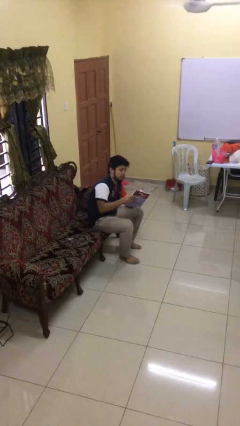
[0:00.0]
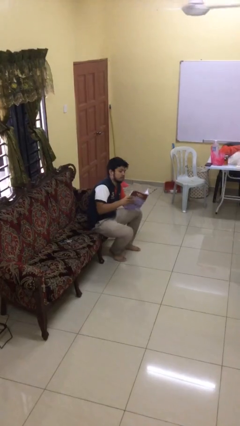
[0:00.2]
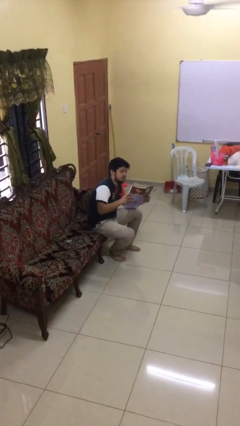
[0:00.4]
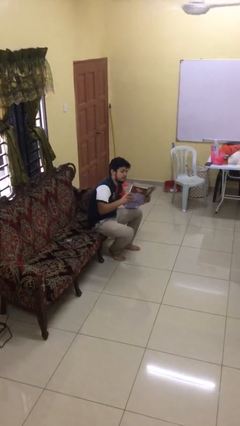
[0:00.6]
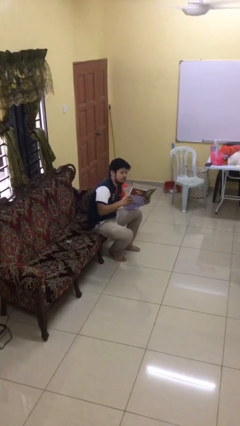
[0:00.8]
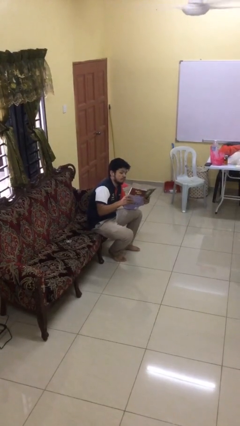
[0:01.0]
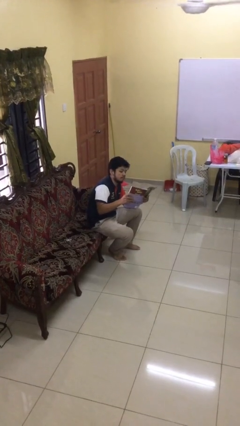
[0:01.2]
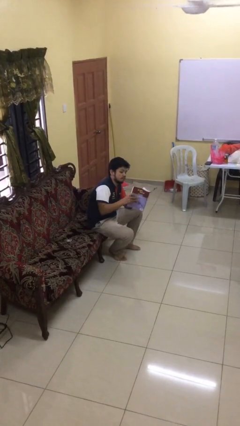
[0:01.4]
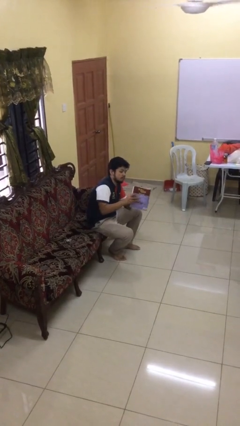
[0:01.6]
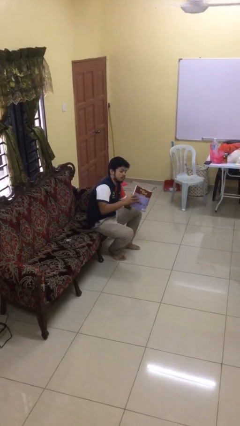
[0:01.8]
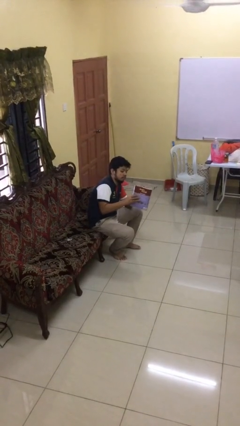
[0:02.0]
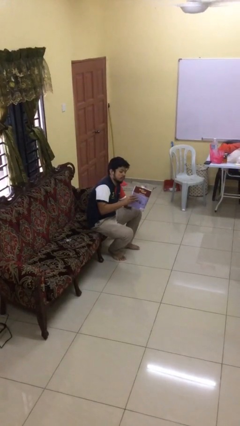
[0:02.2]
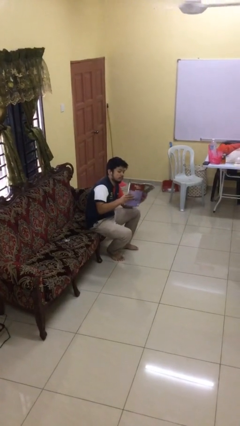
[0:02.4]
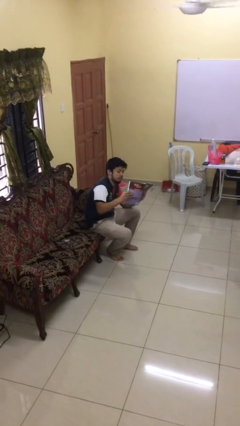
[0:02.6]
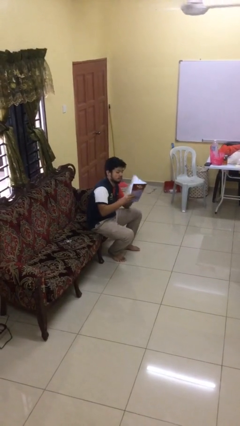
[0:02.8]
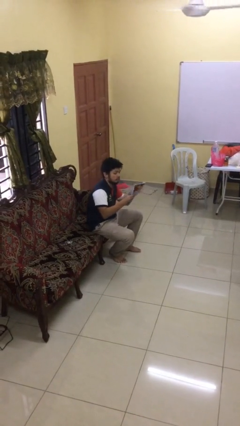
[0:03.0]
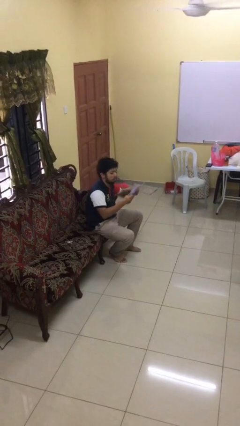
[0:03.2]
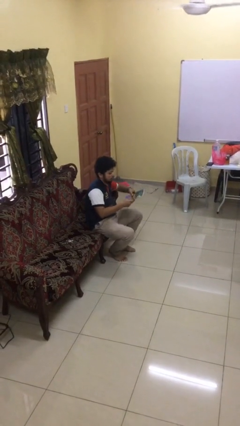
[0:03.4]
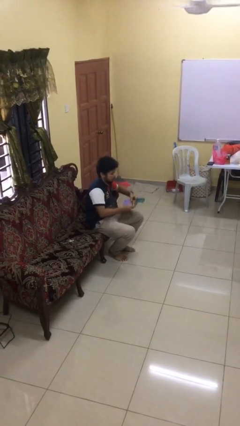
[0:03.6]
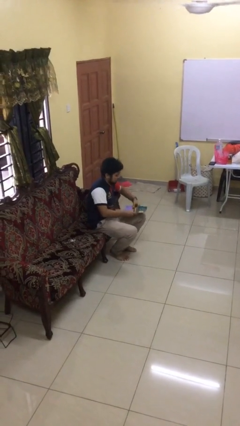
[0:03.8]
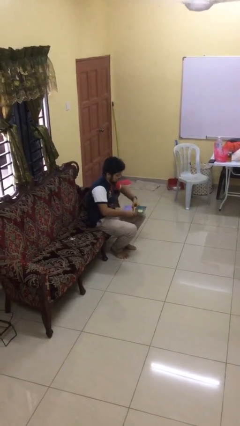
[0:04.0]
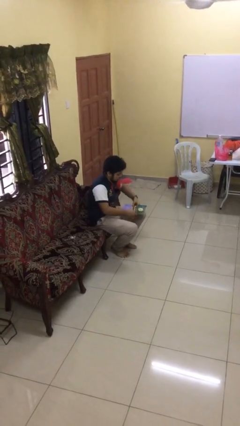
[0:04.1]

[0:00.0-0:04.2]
person reads magazine

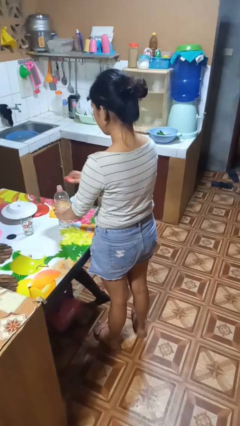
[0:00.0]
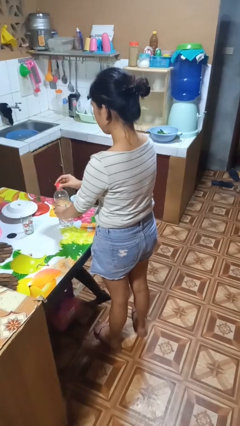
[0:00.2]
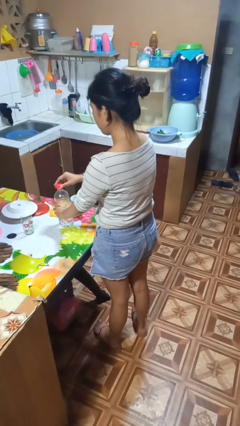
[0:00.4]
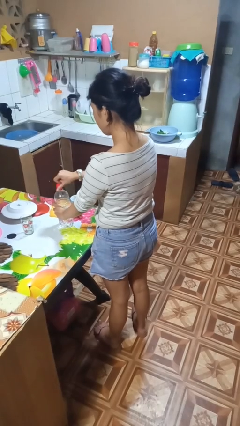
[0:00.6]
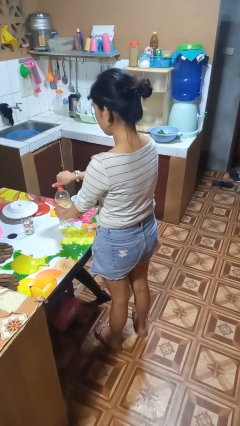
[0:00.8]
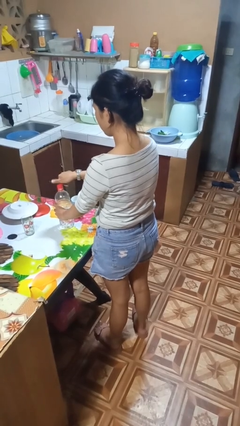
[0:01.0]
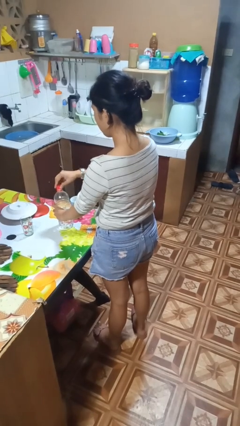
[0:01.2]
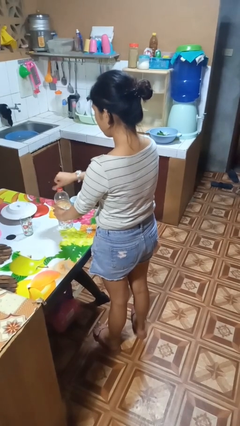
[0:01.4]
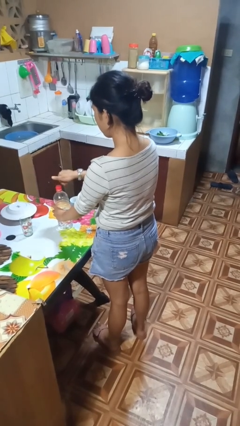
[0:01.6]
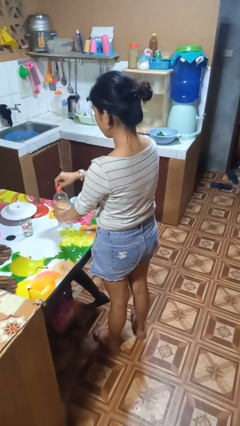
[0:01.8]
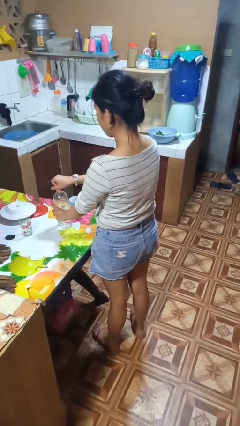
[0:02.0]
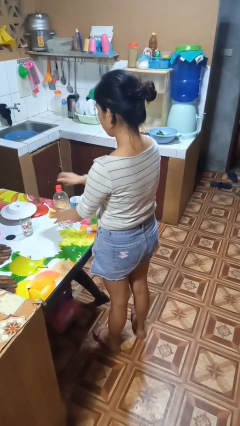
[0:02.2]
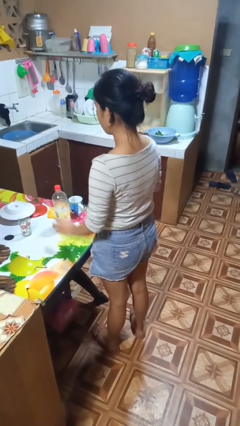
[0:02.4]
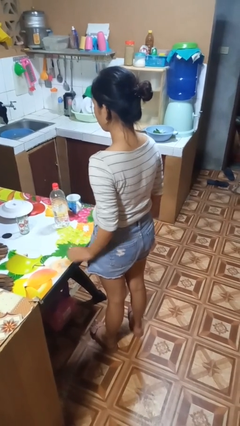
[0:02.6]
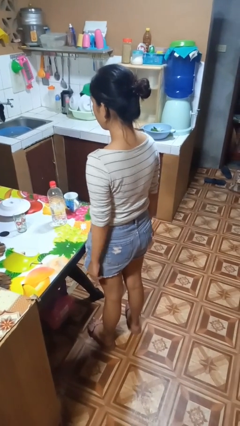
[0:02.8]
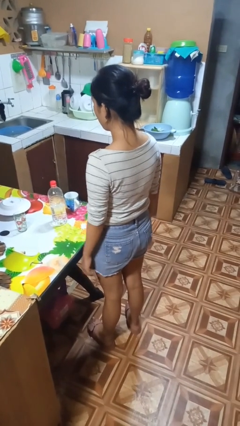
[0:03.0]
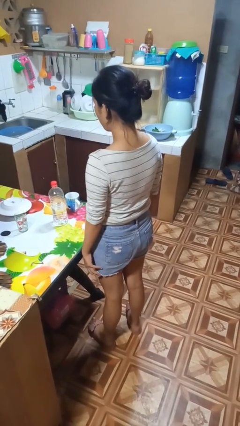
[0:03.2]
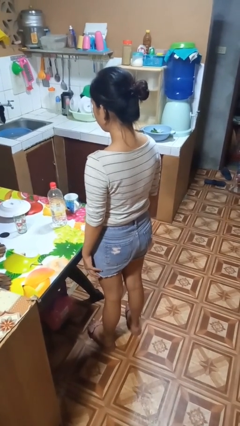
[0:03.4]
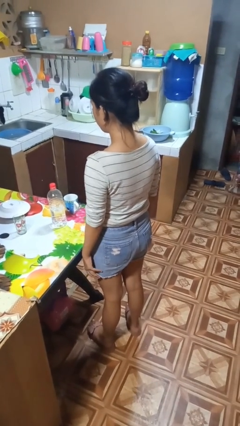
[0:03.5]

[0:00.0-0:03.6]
person screws lid to bottle

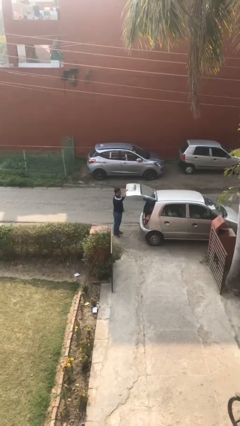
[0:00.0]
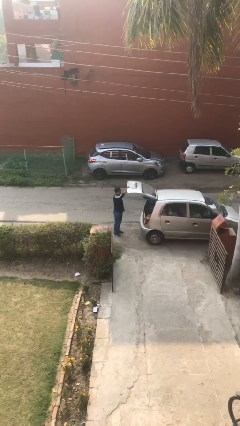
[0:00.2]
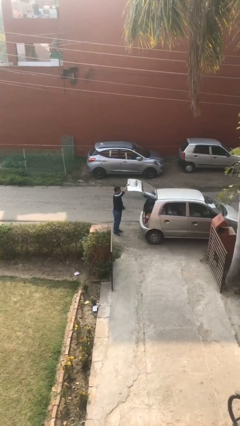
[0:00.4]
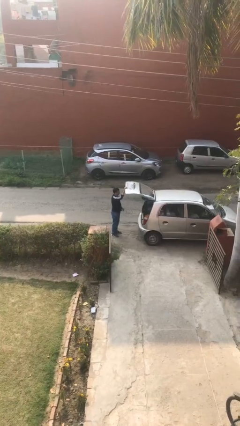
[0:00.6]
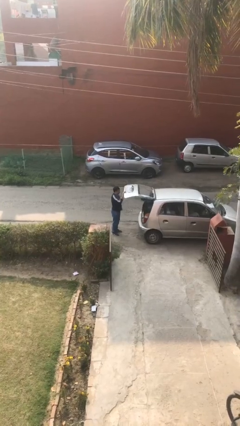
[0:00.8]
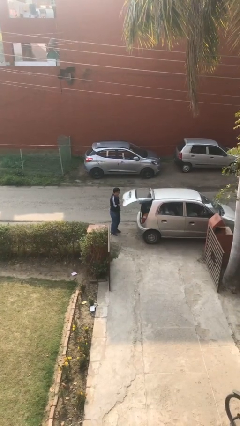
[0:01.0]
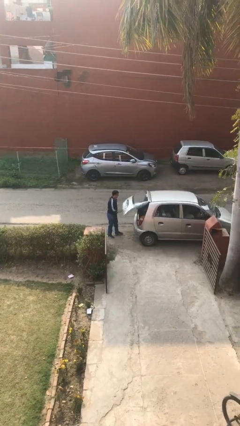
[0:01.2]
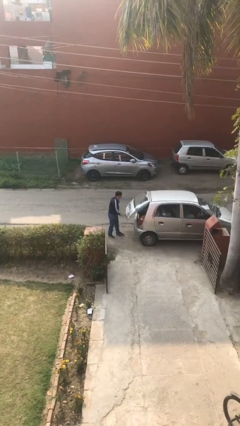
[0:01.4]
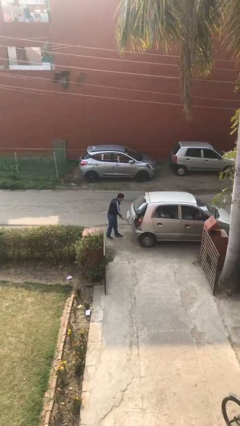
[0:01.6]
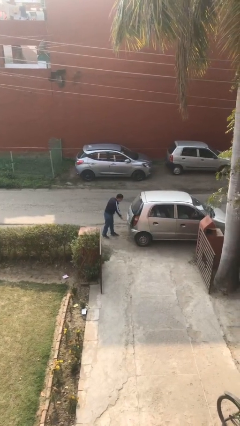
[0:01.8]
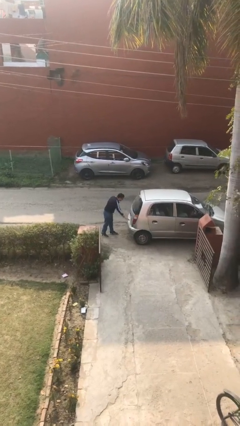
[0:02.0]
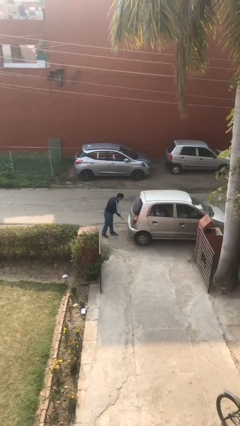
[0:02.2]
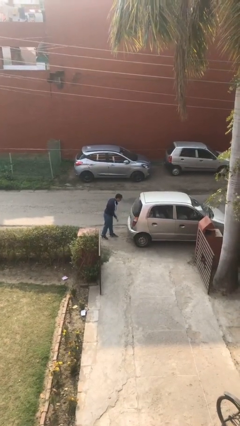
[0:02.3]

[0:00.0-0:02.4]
person closes car trunk

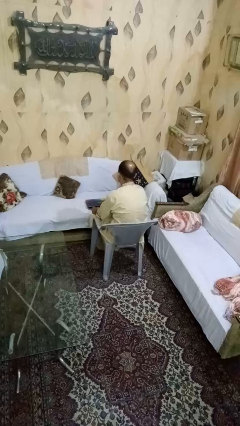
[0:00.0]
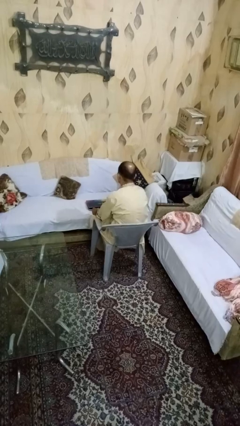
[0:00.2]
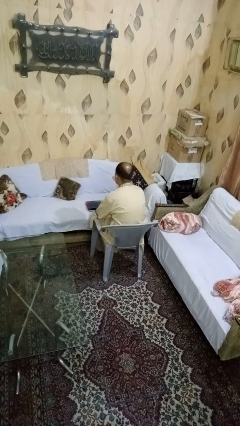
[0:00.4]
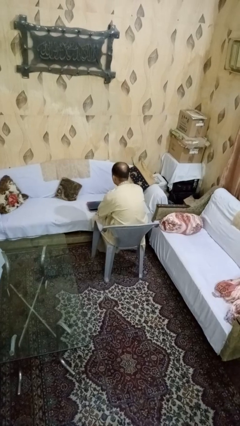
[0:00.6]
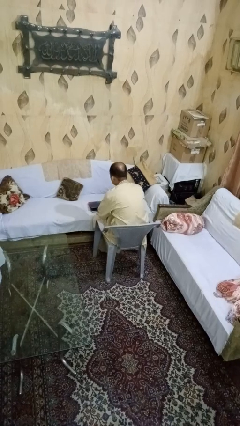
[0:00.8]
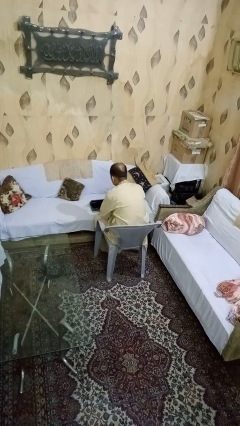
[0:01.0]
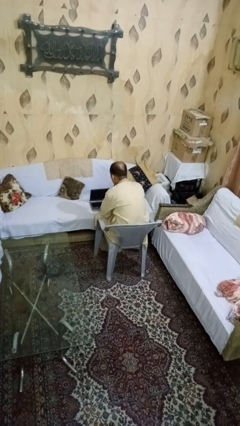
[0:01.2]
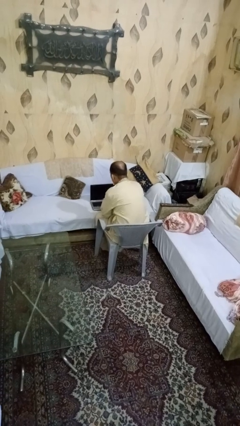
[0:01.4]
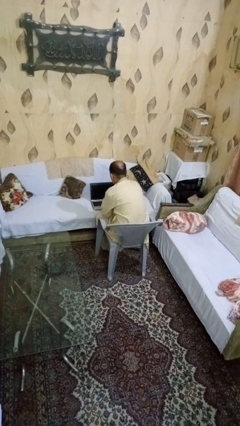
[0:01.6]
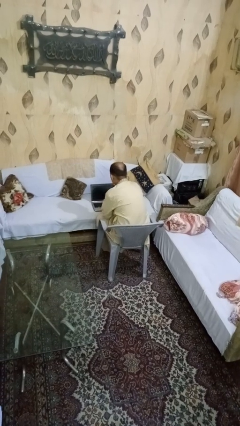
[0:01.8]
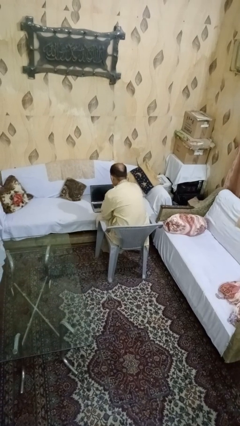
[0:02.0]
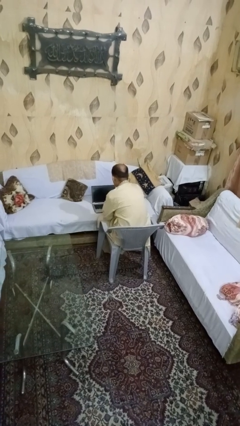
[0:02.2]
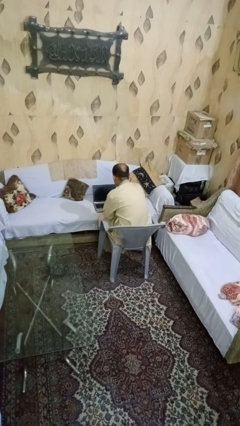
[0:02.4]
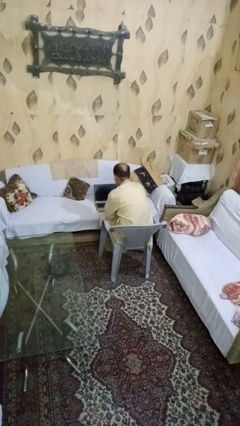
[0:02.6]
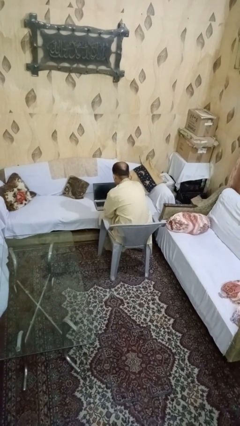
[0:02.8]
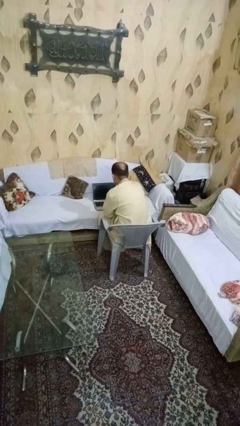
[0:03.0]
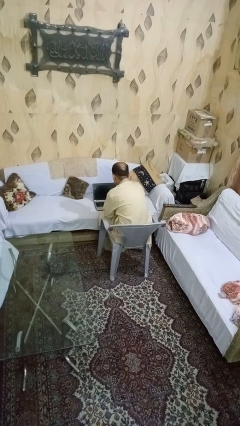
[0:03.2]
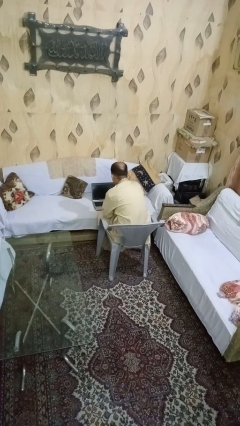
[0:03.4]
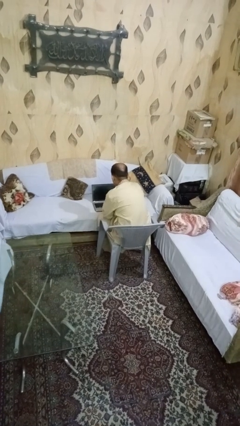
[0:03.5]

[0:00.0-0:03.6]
person opens laptop

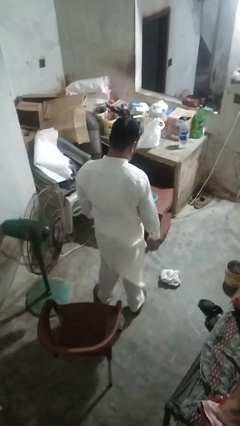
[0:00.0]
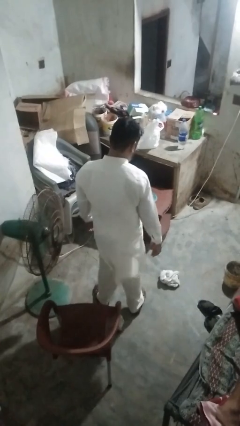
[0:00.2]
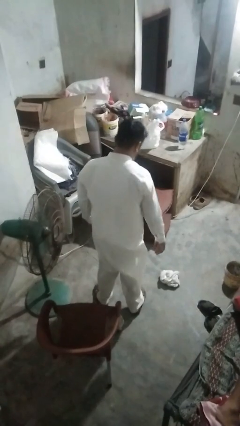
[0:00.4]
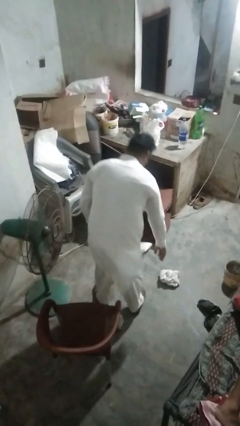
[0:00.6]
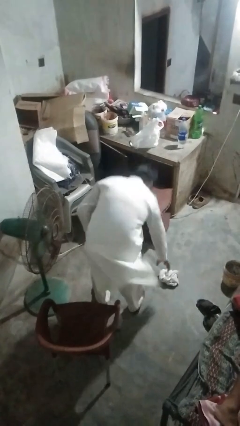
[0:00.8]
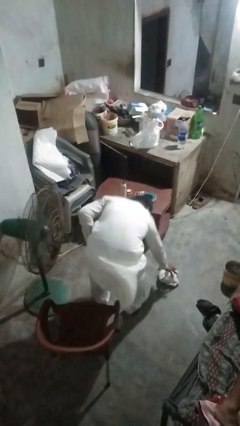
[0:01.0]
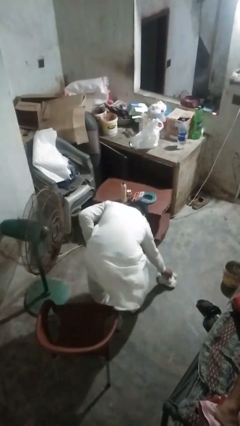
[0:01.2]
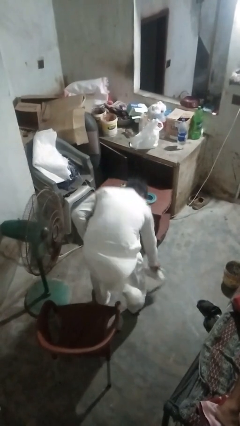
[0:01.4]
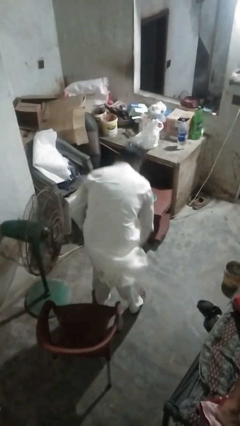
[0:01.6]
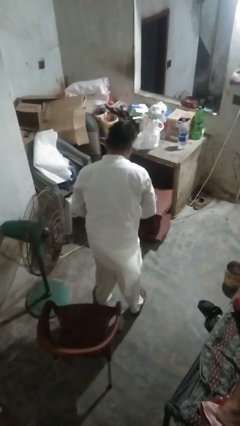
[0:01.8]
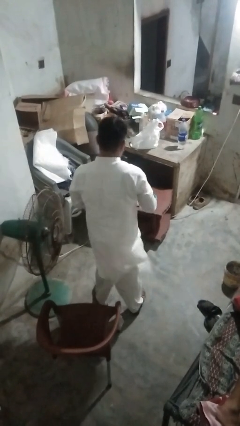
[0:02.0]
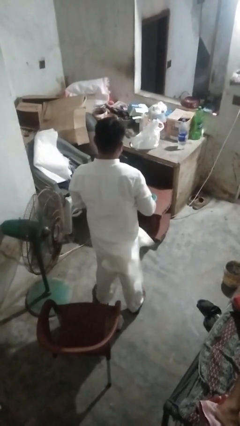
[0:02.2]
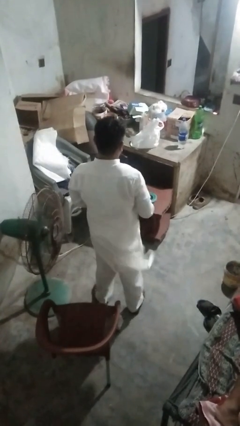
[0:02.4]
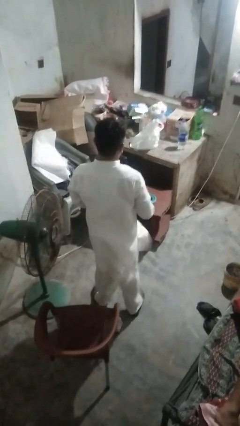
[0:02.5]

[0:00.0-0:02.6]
person picks up object from floor

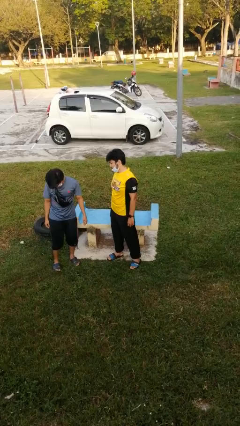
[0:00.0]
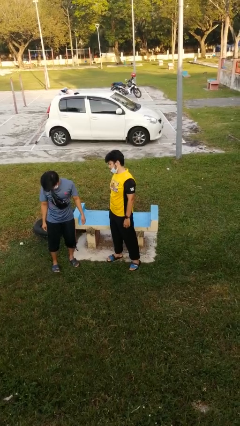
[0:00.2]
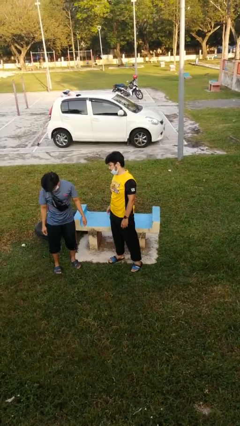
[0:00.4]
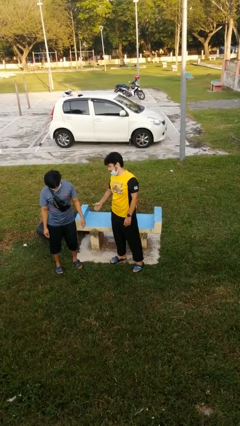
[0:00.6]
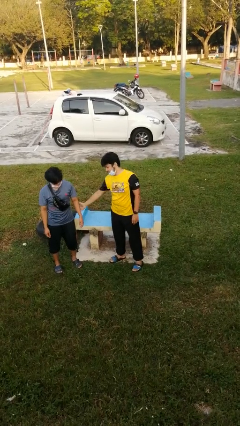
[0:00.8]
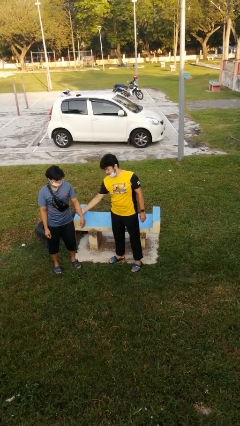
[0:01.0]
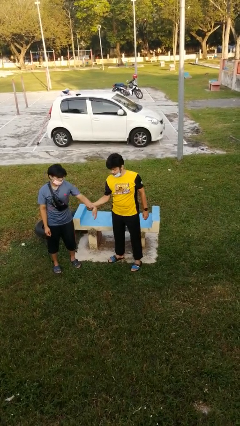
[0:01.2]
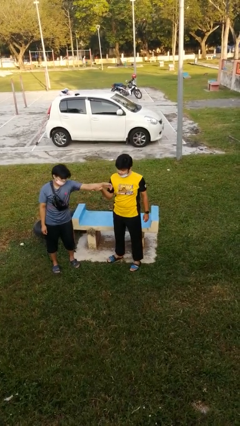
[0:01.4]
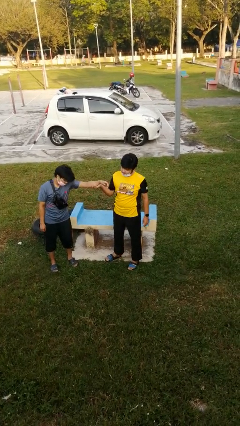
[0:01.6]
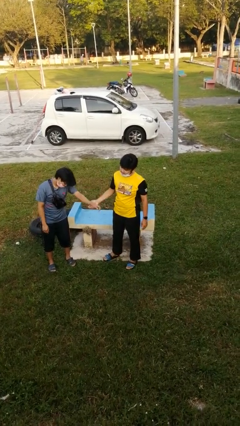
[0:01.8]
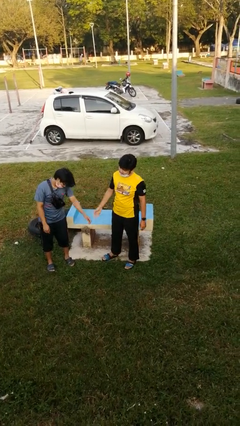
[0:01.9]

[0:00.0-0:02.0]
person grabs person by forearm
